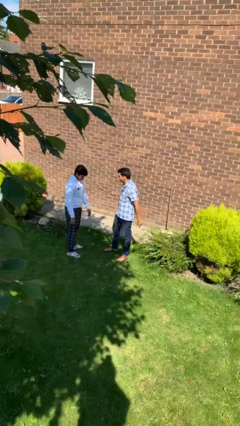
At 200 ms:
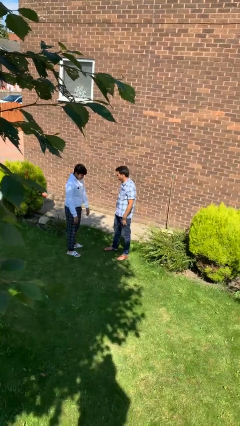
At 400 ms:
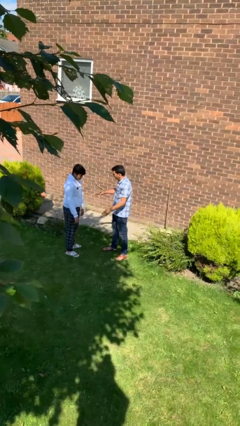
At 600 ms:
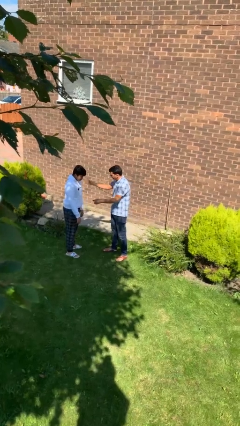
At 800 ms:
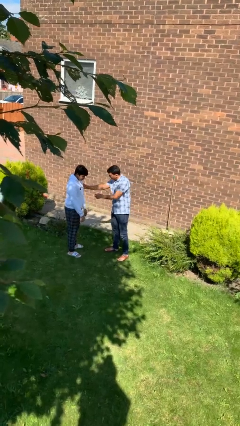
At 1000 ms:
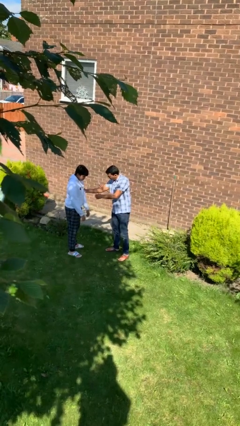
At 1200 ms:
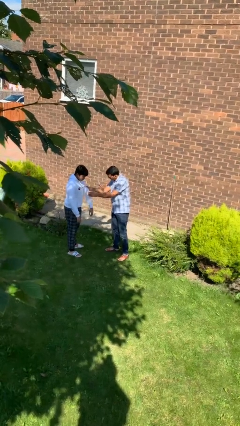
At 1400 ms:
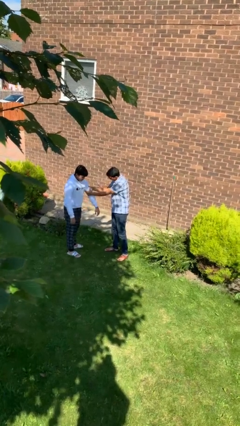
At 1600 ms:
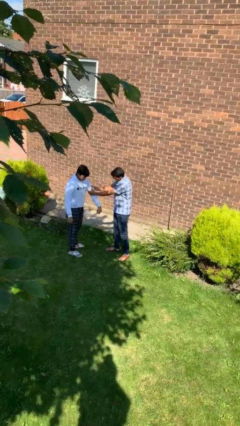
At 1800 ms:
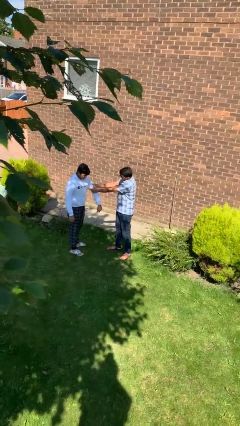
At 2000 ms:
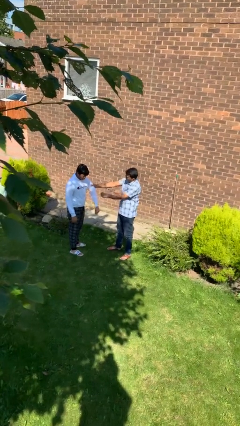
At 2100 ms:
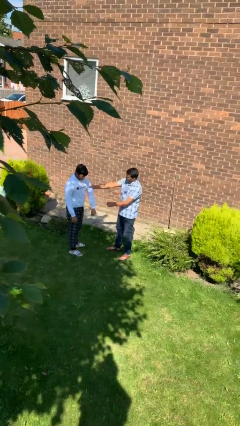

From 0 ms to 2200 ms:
person grabs person by bicep

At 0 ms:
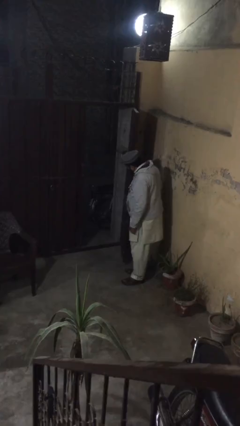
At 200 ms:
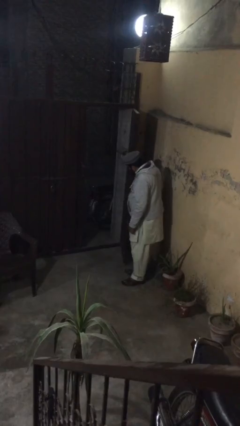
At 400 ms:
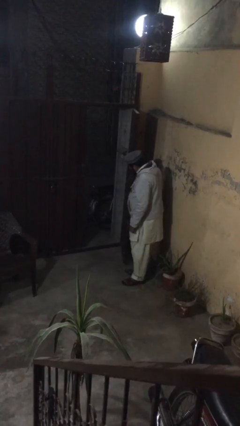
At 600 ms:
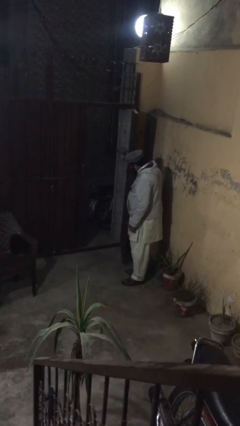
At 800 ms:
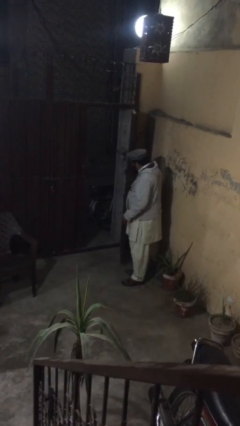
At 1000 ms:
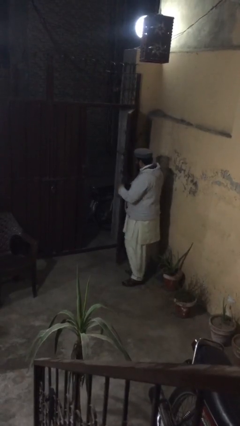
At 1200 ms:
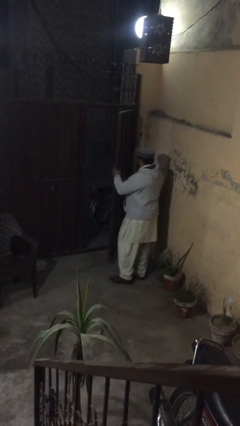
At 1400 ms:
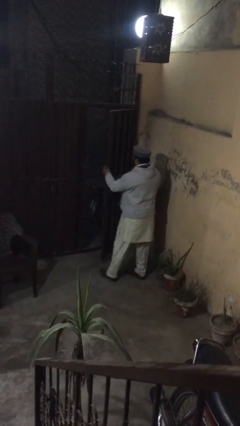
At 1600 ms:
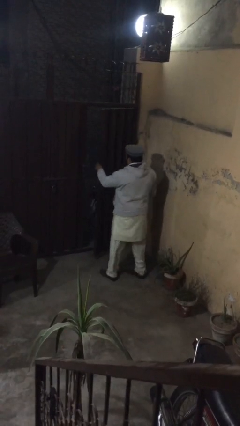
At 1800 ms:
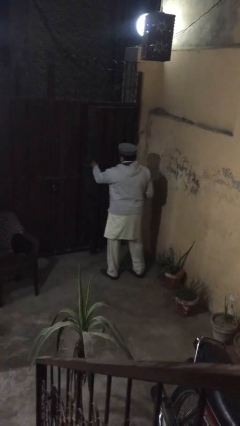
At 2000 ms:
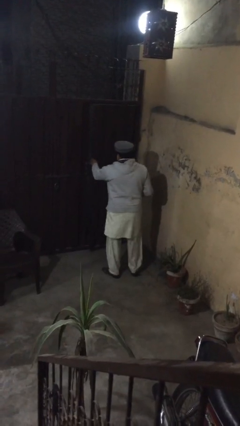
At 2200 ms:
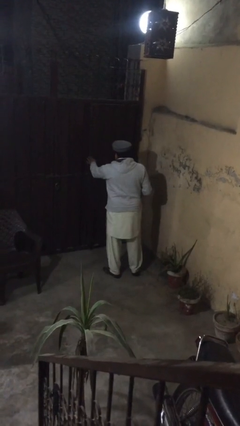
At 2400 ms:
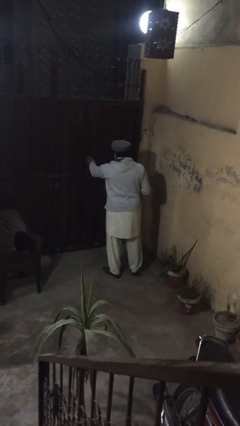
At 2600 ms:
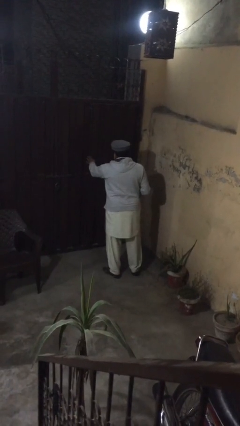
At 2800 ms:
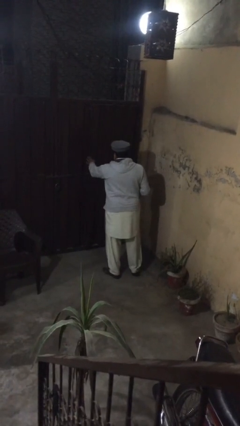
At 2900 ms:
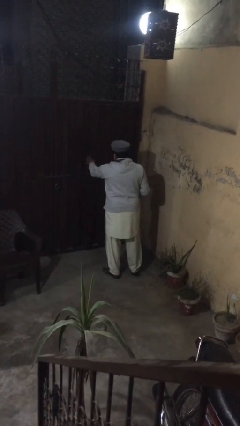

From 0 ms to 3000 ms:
person closes facility door

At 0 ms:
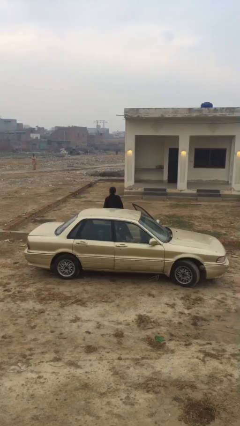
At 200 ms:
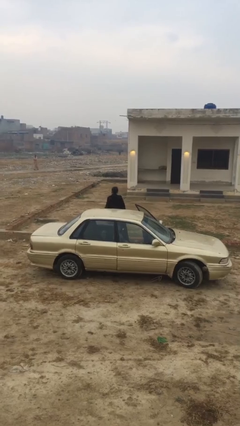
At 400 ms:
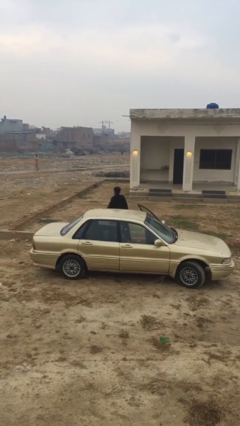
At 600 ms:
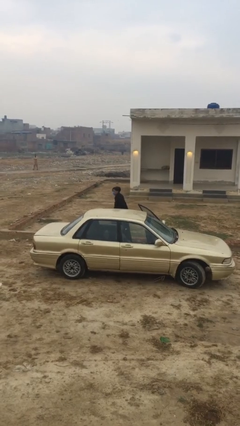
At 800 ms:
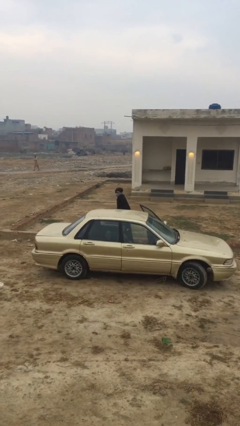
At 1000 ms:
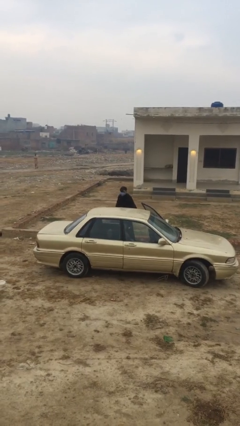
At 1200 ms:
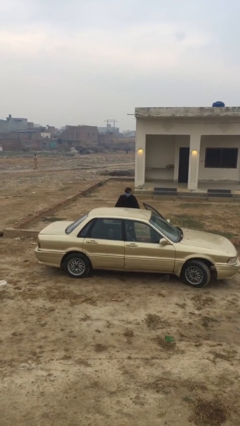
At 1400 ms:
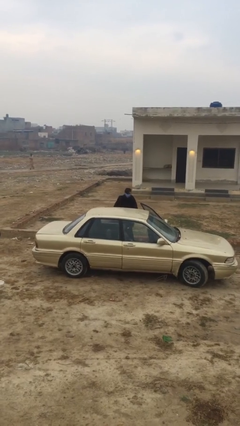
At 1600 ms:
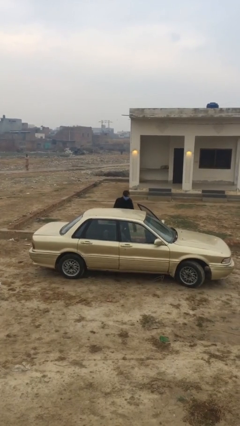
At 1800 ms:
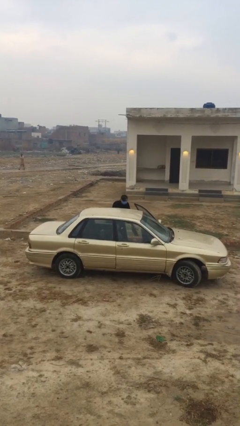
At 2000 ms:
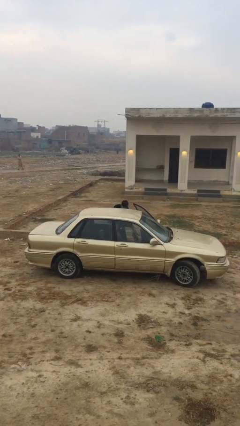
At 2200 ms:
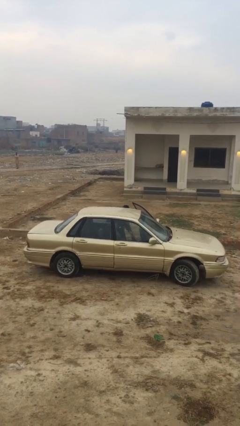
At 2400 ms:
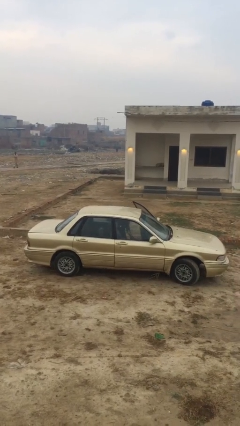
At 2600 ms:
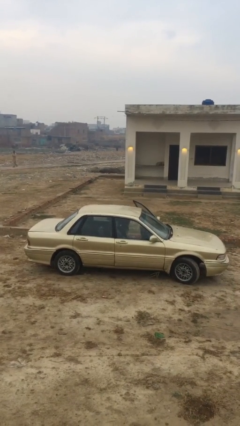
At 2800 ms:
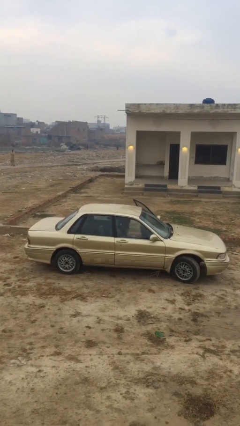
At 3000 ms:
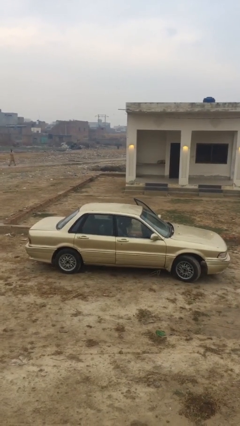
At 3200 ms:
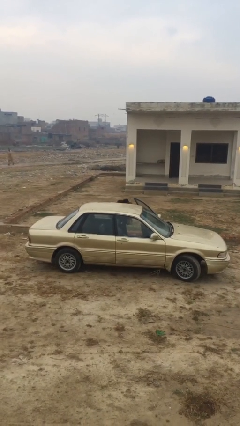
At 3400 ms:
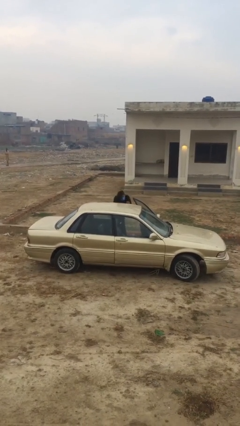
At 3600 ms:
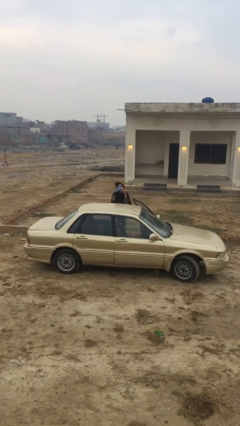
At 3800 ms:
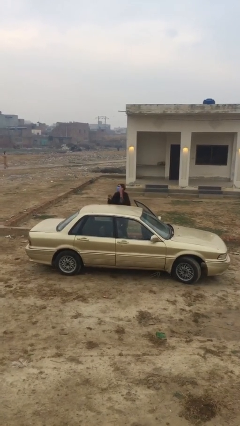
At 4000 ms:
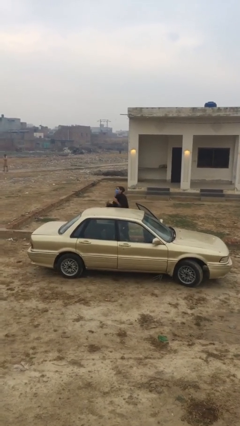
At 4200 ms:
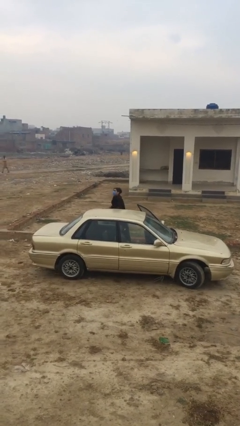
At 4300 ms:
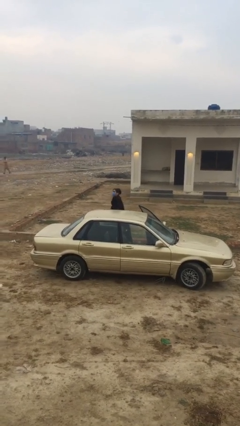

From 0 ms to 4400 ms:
person loads car

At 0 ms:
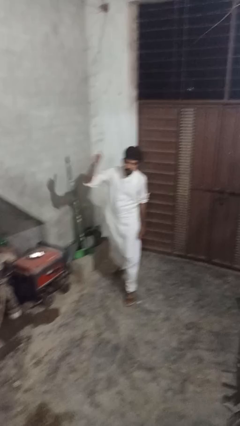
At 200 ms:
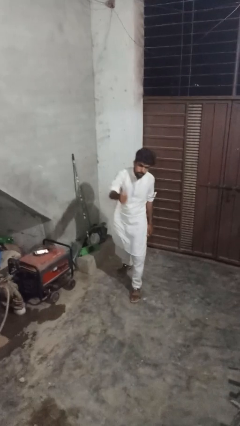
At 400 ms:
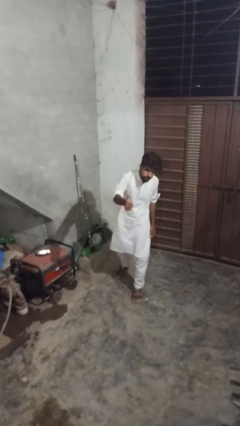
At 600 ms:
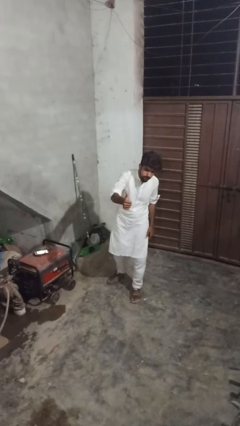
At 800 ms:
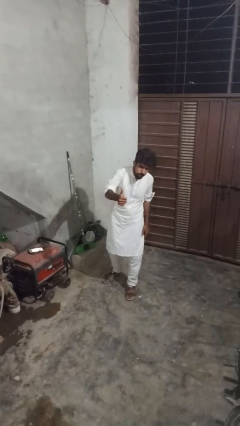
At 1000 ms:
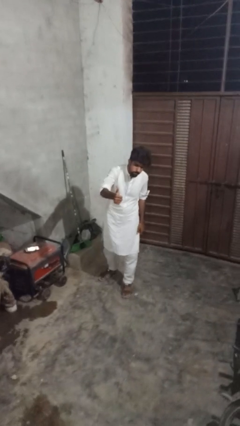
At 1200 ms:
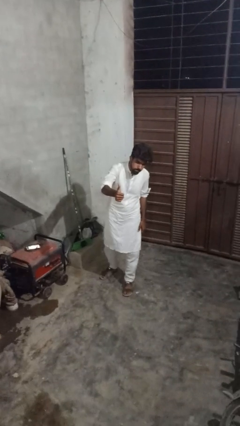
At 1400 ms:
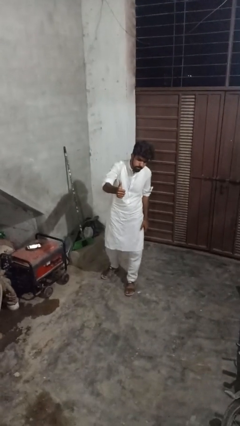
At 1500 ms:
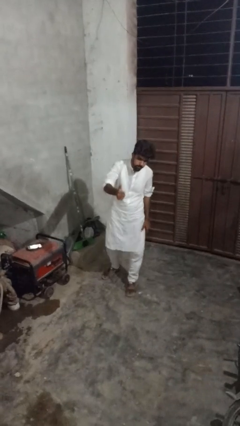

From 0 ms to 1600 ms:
person gestures thumbs up

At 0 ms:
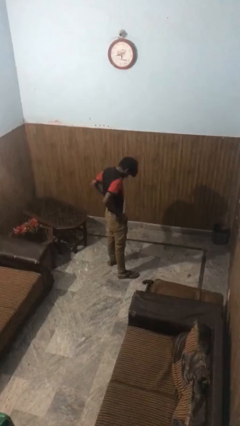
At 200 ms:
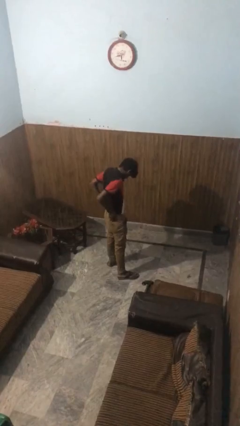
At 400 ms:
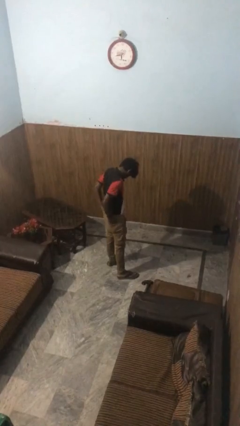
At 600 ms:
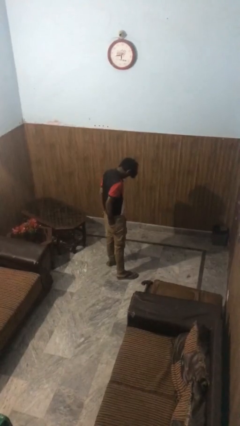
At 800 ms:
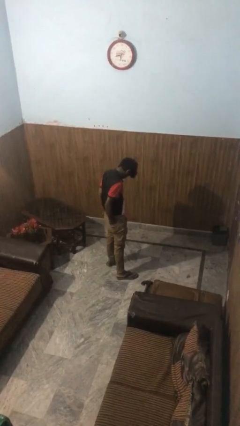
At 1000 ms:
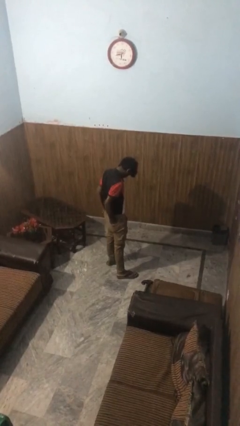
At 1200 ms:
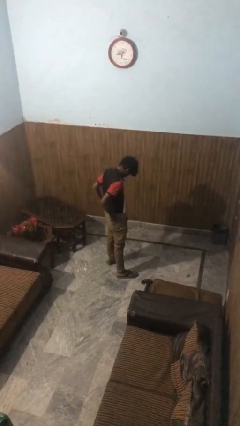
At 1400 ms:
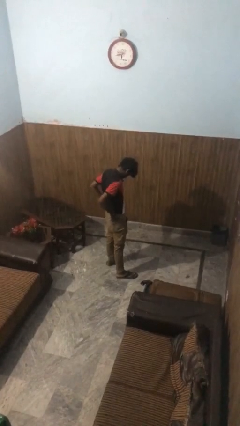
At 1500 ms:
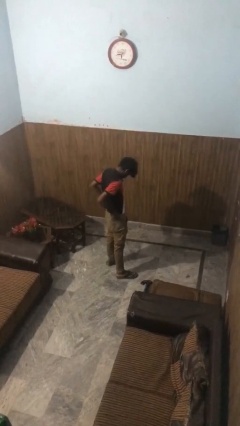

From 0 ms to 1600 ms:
person puts hands in back pockets

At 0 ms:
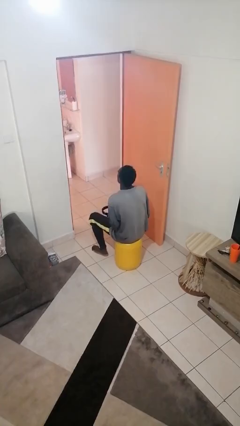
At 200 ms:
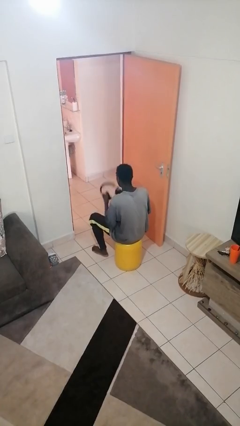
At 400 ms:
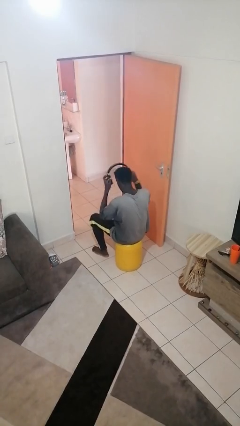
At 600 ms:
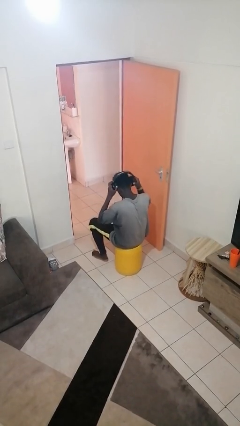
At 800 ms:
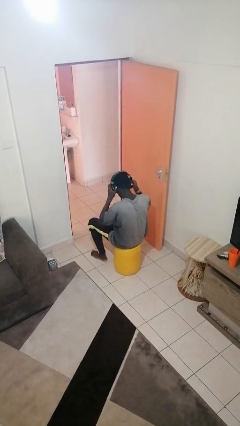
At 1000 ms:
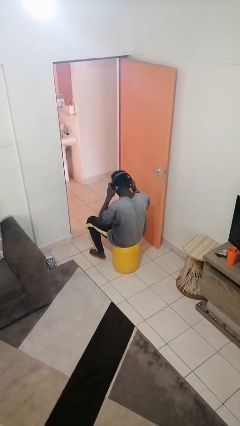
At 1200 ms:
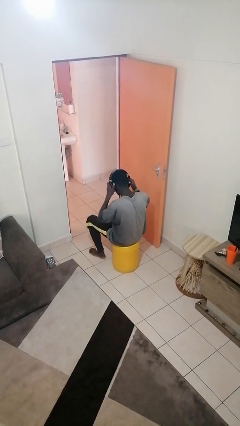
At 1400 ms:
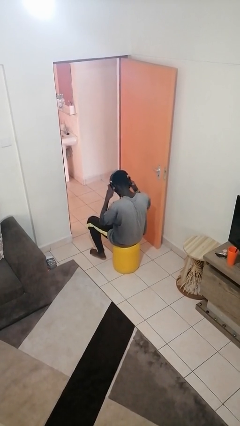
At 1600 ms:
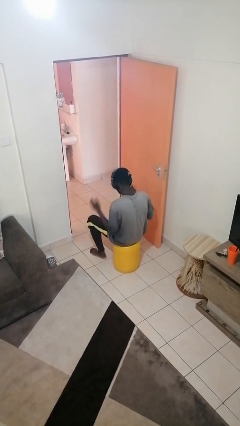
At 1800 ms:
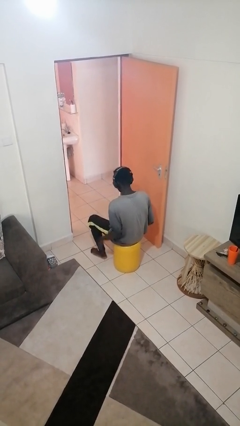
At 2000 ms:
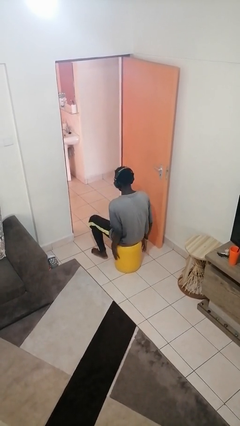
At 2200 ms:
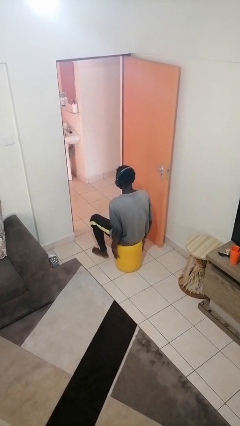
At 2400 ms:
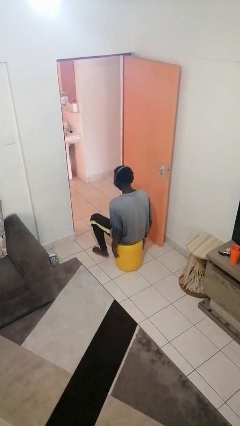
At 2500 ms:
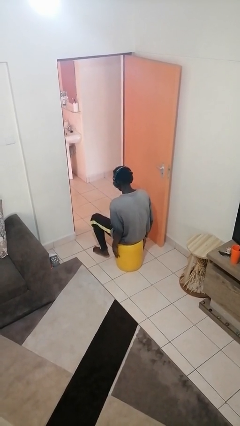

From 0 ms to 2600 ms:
person puts on headphones

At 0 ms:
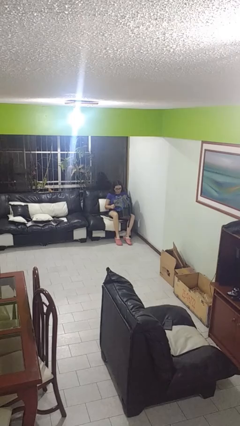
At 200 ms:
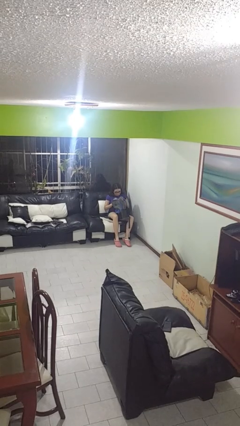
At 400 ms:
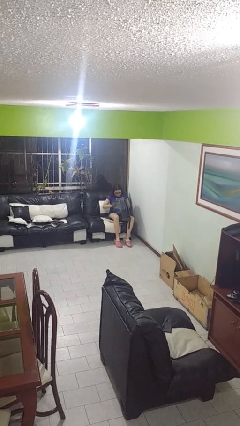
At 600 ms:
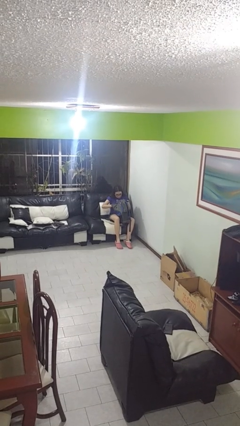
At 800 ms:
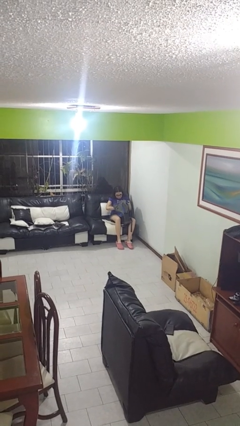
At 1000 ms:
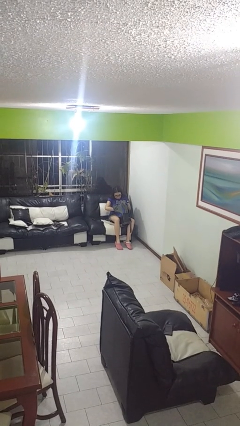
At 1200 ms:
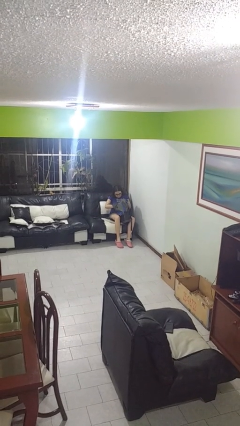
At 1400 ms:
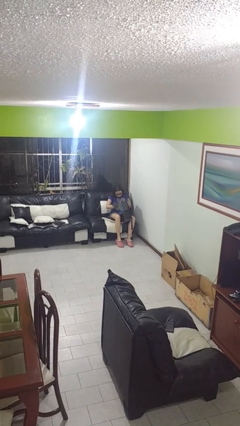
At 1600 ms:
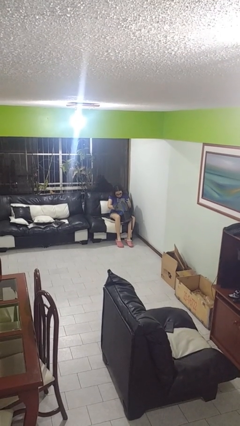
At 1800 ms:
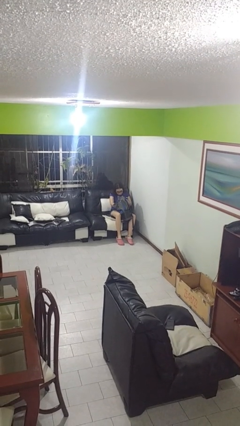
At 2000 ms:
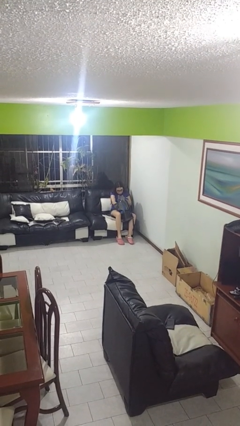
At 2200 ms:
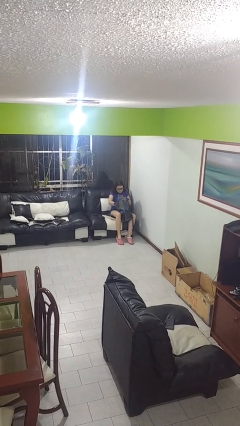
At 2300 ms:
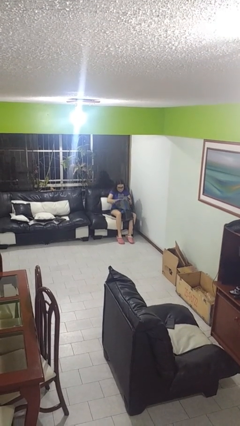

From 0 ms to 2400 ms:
person searches in backpack
